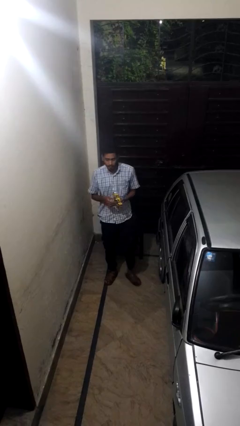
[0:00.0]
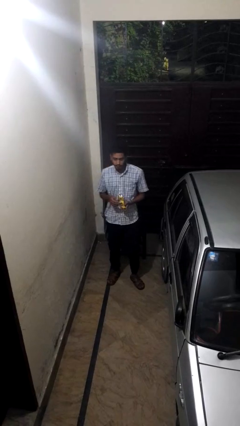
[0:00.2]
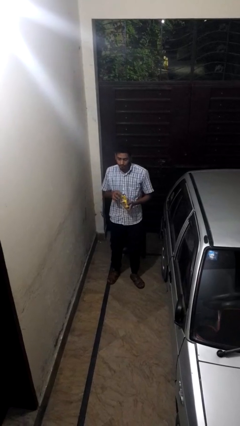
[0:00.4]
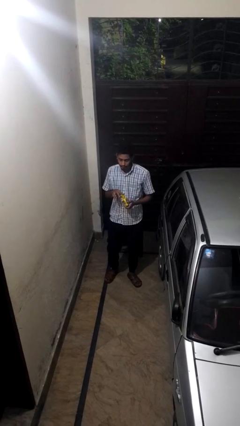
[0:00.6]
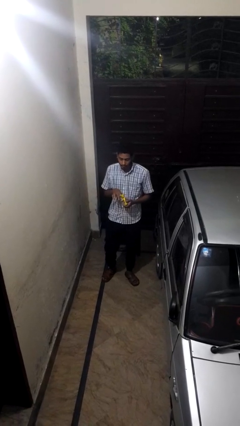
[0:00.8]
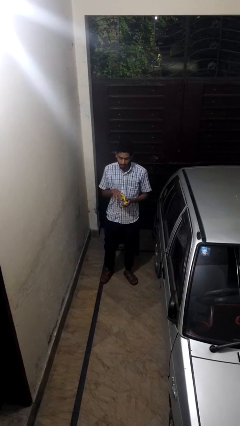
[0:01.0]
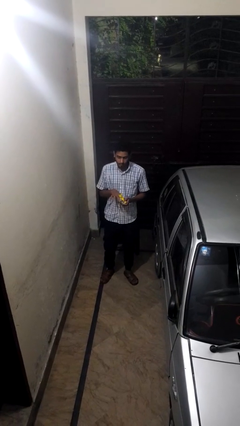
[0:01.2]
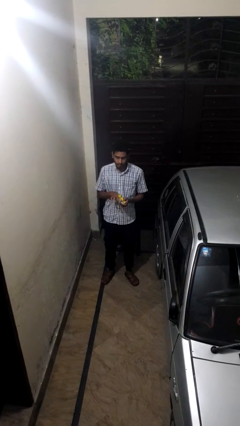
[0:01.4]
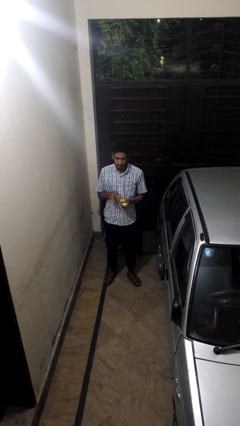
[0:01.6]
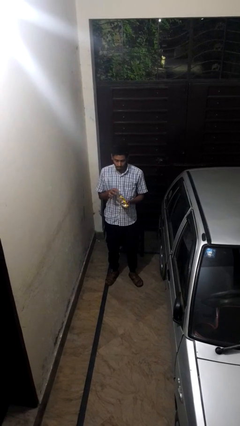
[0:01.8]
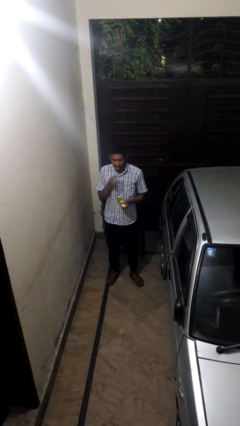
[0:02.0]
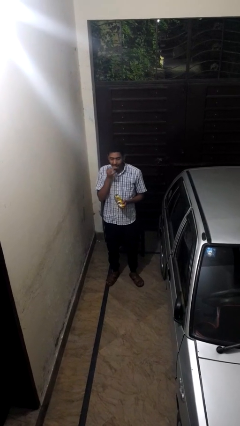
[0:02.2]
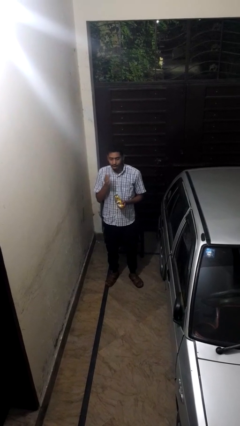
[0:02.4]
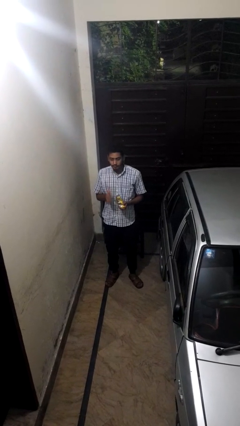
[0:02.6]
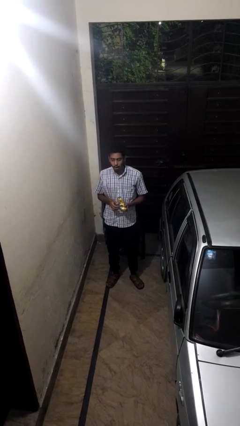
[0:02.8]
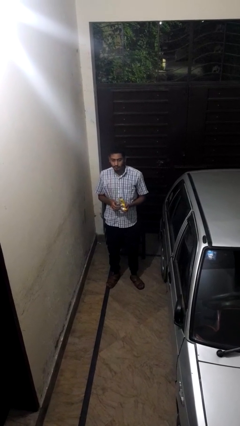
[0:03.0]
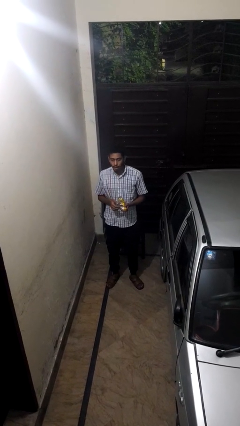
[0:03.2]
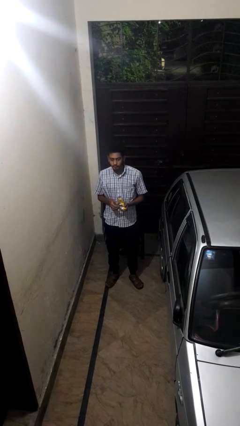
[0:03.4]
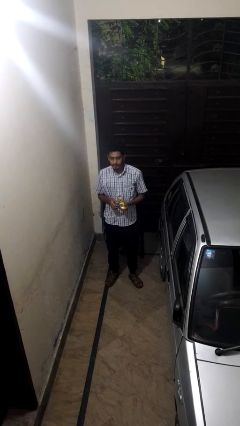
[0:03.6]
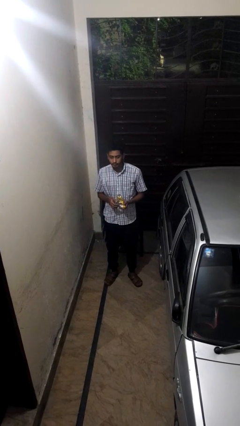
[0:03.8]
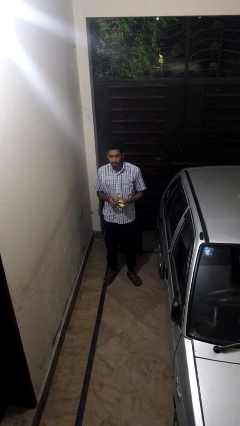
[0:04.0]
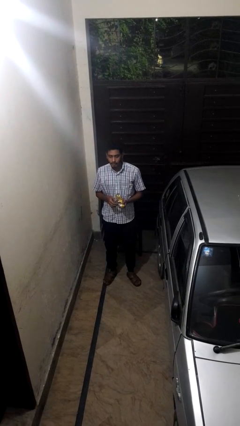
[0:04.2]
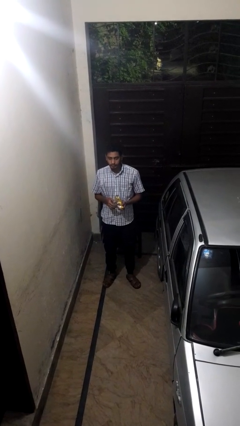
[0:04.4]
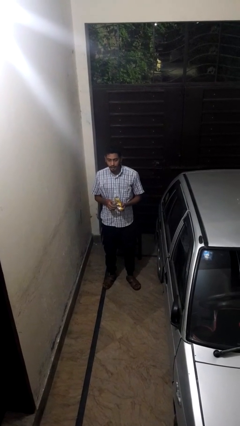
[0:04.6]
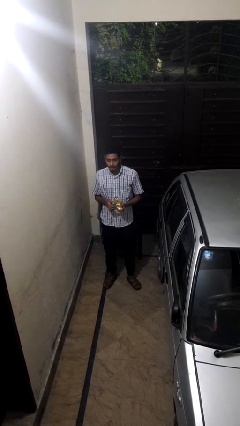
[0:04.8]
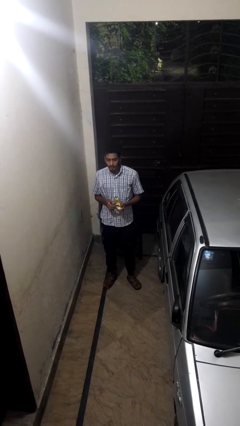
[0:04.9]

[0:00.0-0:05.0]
person eats snack from bag

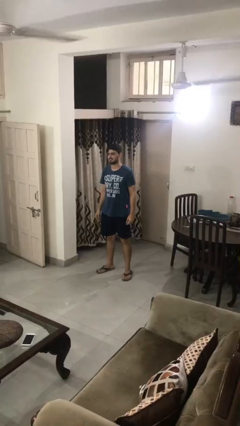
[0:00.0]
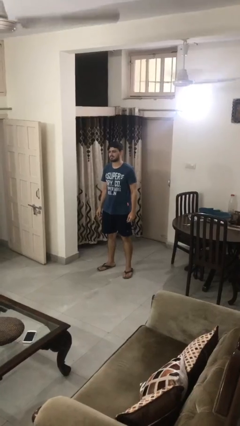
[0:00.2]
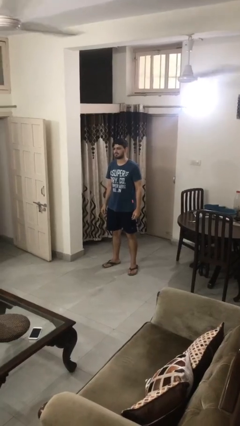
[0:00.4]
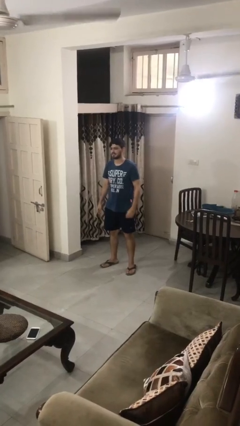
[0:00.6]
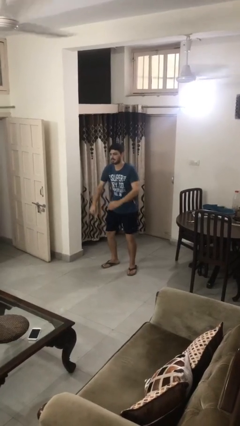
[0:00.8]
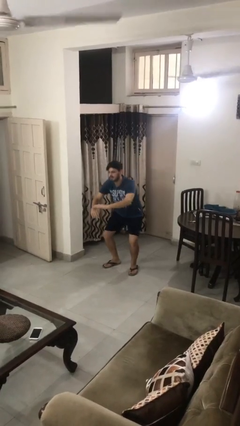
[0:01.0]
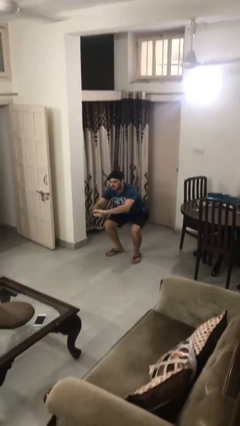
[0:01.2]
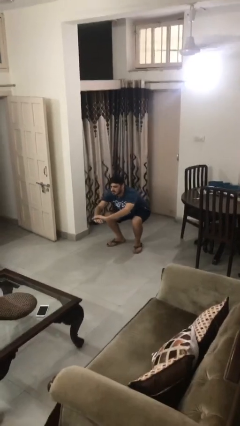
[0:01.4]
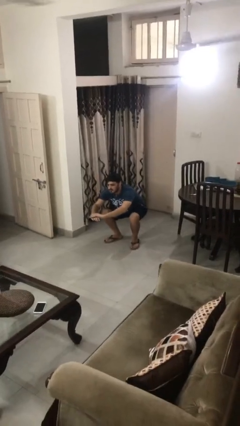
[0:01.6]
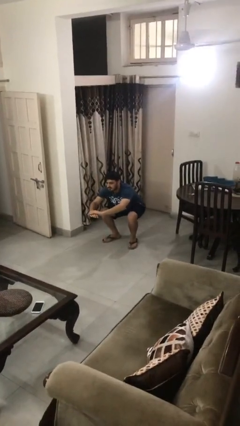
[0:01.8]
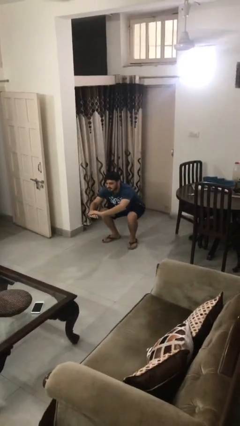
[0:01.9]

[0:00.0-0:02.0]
person squats

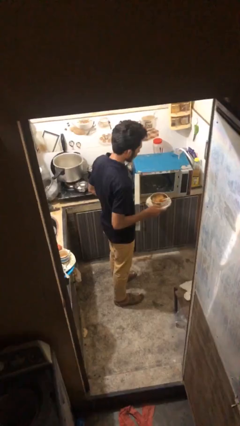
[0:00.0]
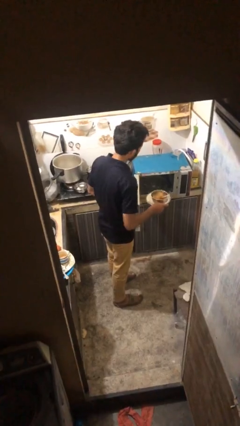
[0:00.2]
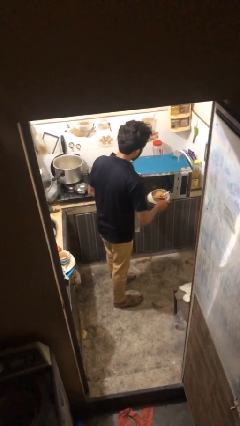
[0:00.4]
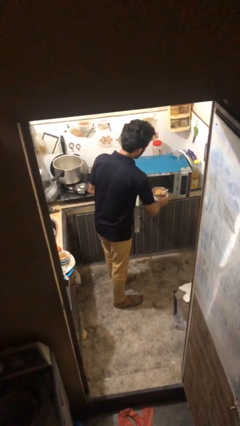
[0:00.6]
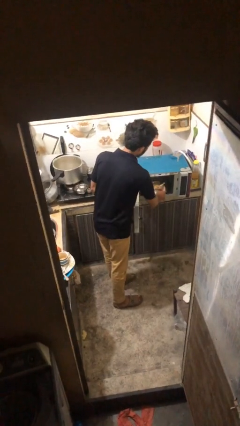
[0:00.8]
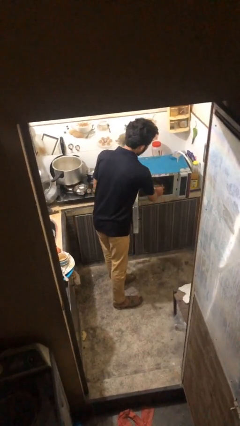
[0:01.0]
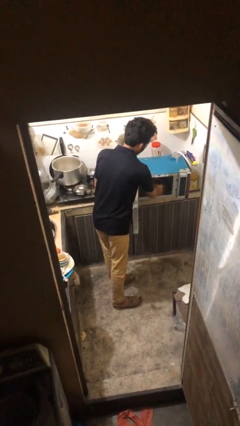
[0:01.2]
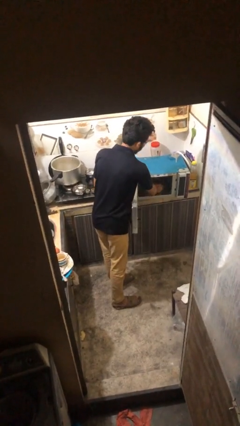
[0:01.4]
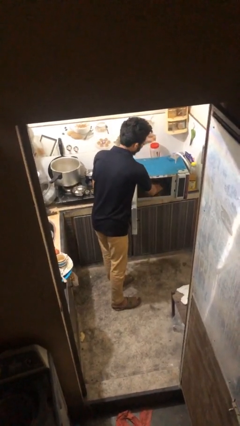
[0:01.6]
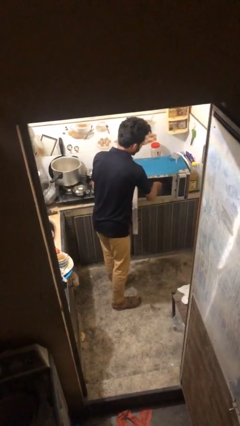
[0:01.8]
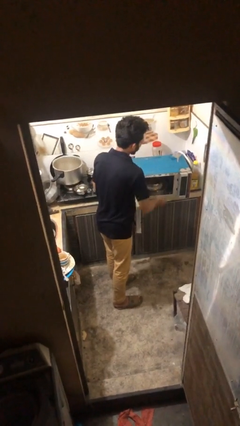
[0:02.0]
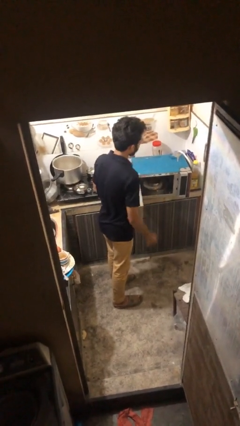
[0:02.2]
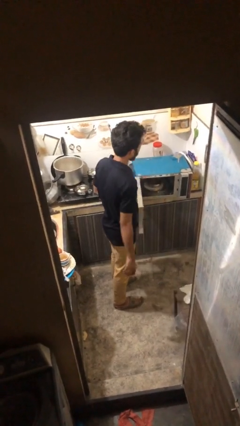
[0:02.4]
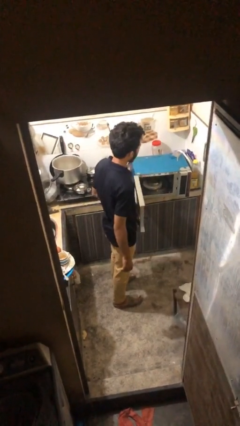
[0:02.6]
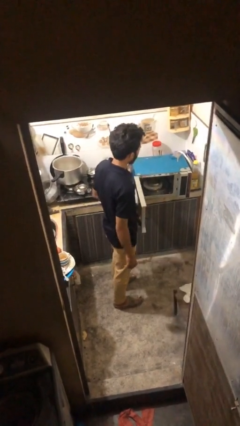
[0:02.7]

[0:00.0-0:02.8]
person puts object into microwave

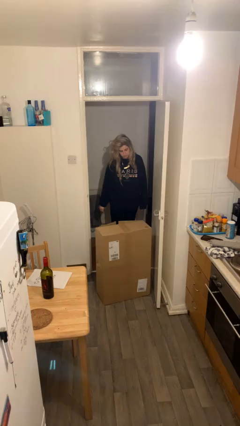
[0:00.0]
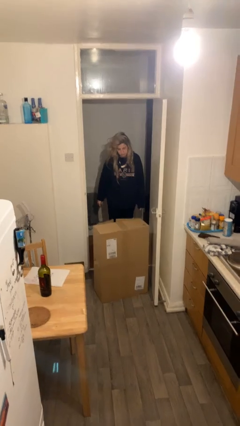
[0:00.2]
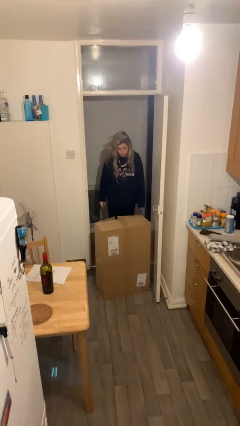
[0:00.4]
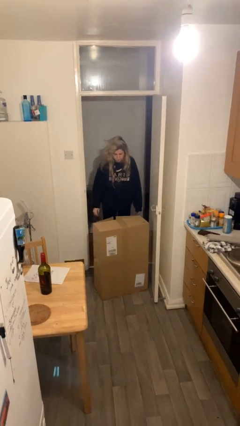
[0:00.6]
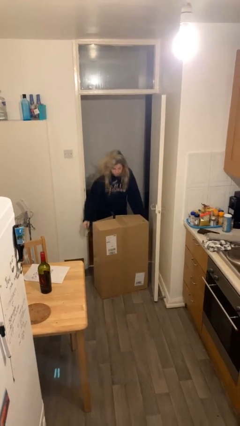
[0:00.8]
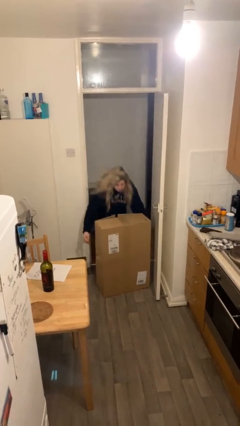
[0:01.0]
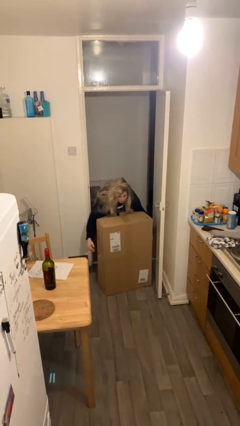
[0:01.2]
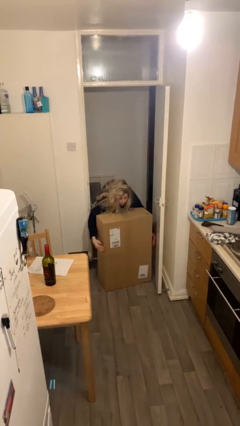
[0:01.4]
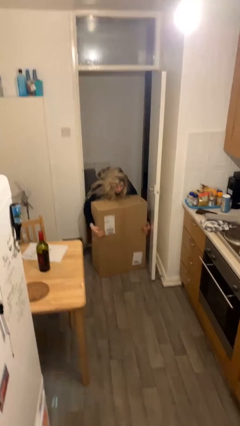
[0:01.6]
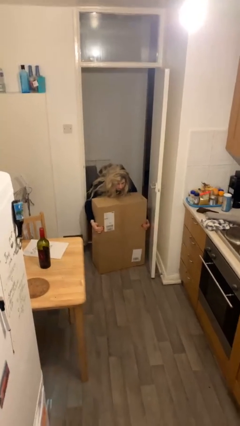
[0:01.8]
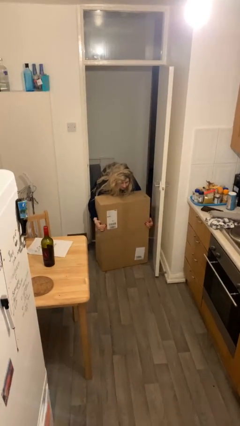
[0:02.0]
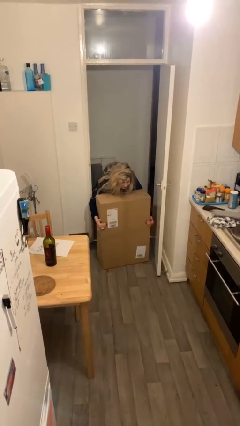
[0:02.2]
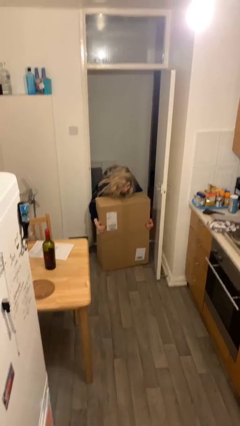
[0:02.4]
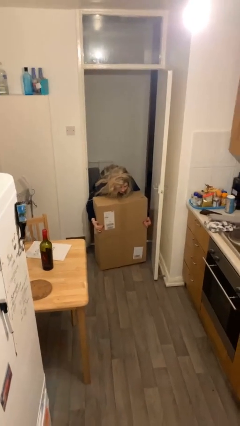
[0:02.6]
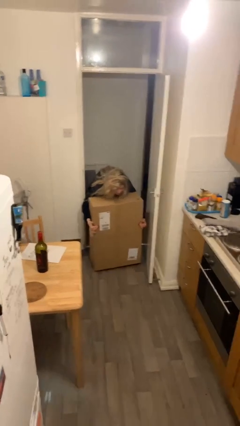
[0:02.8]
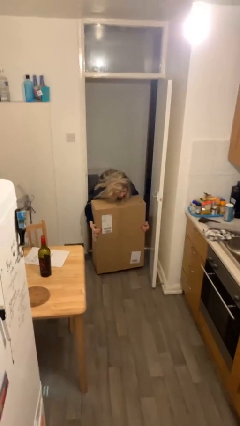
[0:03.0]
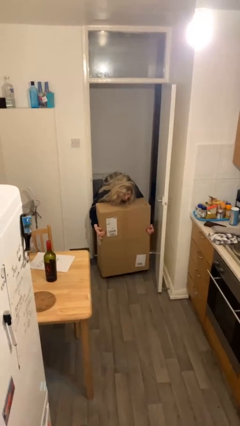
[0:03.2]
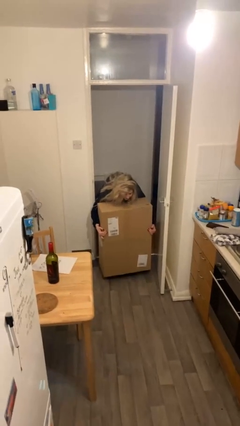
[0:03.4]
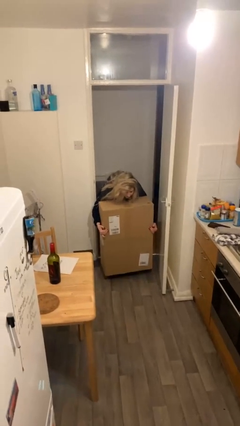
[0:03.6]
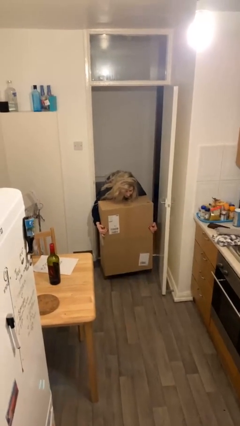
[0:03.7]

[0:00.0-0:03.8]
person picks up object from floor

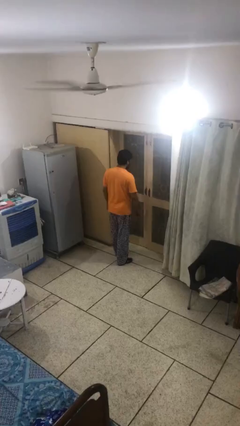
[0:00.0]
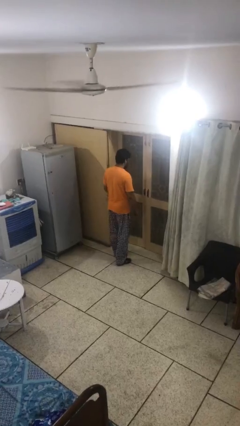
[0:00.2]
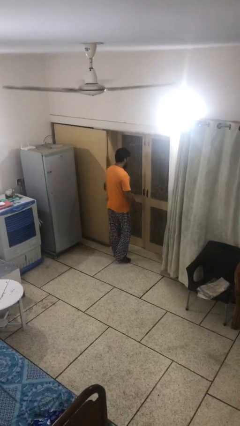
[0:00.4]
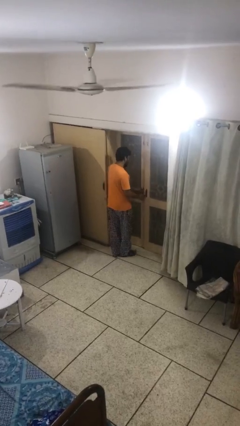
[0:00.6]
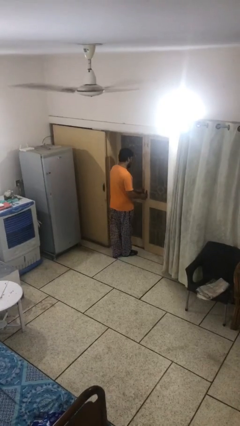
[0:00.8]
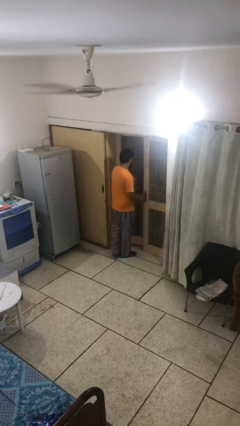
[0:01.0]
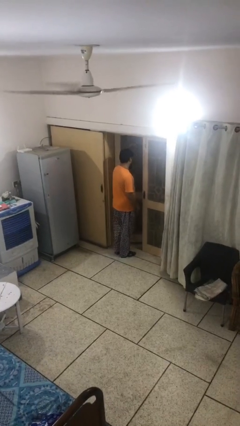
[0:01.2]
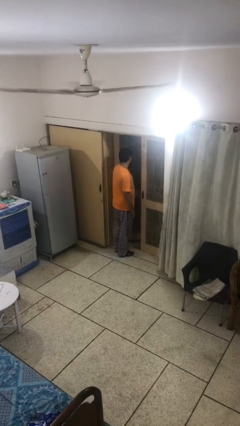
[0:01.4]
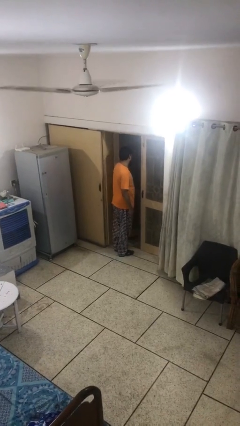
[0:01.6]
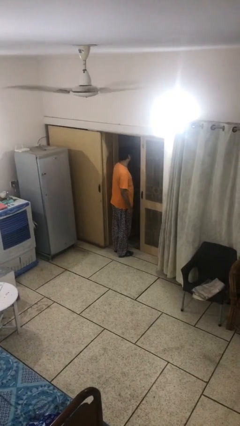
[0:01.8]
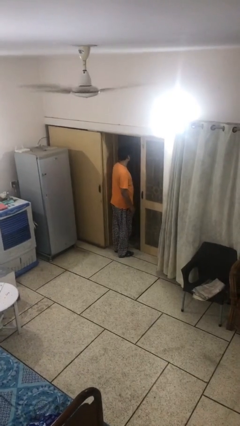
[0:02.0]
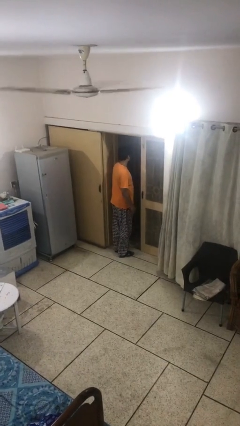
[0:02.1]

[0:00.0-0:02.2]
person opens facility door

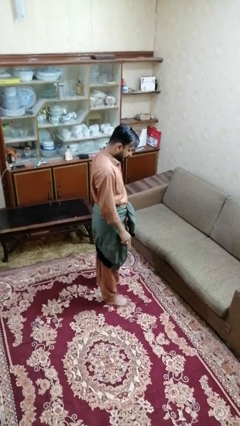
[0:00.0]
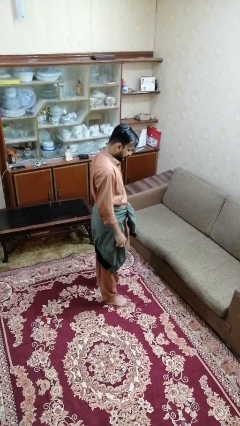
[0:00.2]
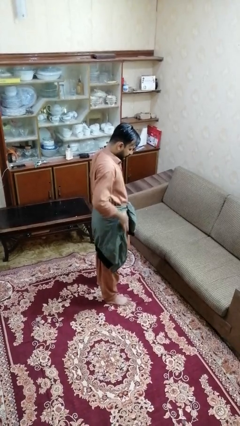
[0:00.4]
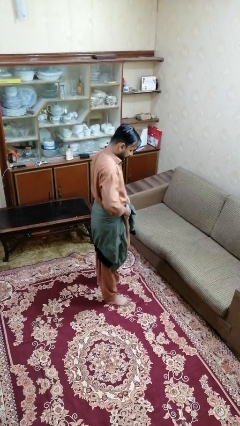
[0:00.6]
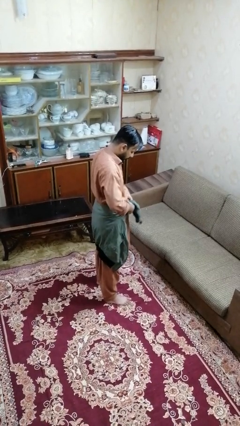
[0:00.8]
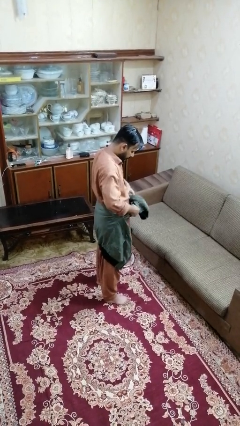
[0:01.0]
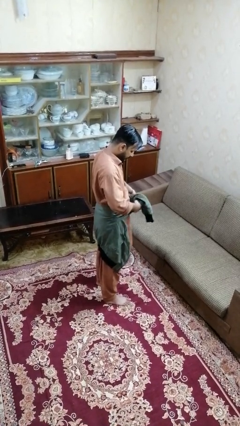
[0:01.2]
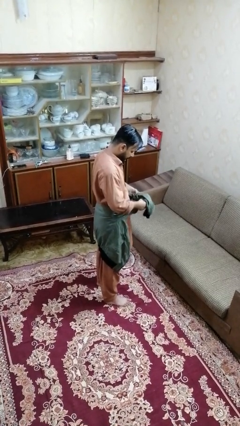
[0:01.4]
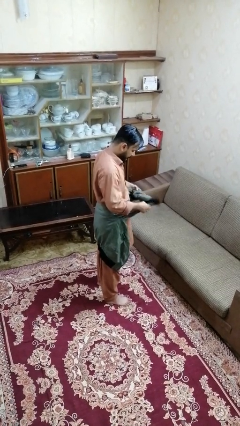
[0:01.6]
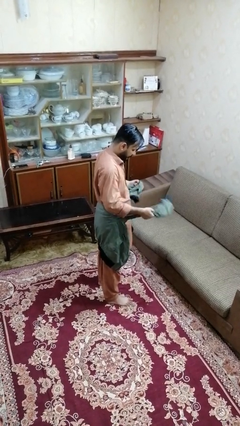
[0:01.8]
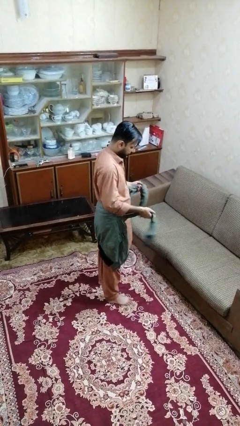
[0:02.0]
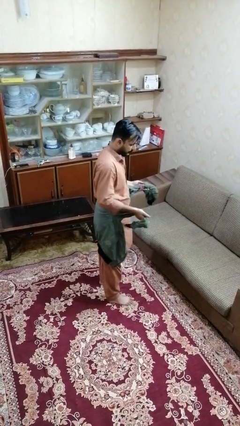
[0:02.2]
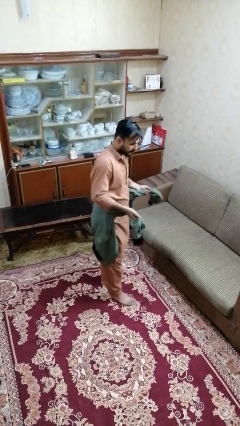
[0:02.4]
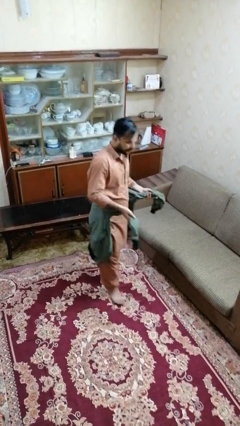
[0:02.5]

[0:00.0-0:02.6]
person unties jacket around waist
